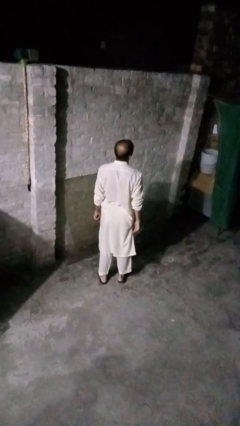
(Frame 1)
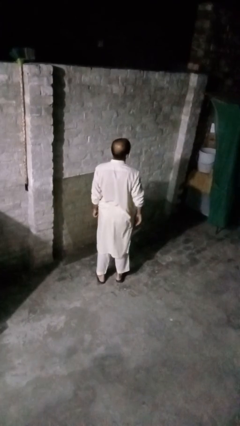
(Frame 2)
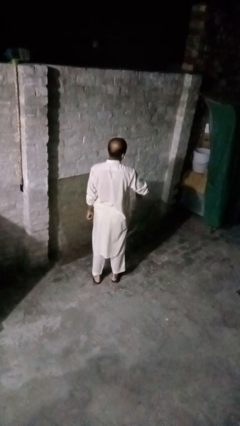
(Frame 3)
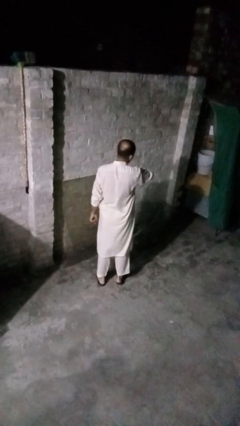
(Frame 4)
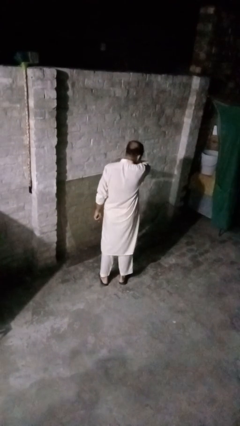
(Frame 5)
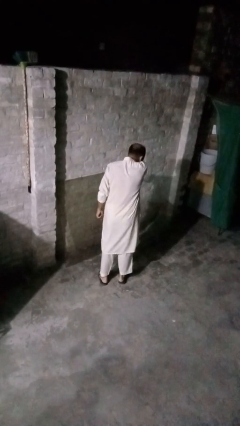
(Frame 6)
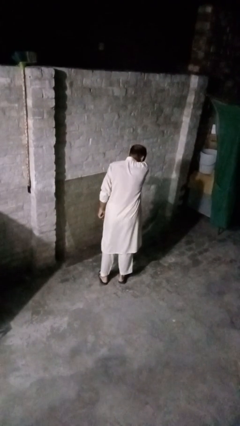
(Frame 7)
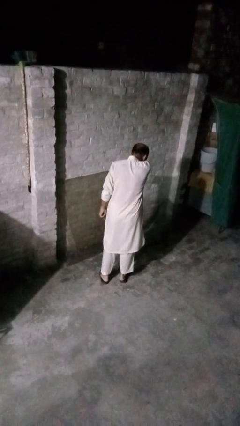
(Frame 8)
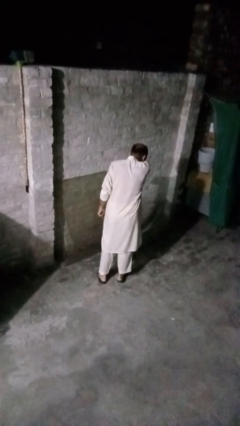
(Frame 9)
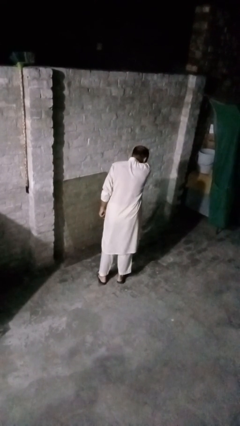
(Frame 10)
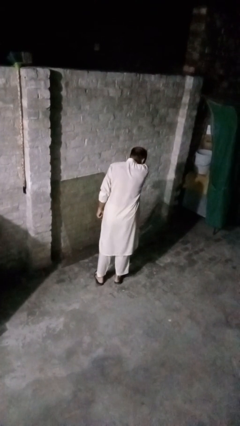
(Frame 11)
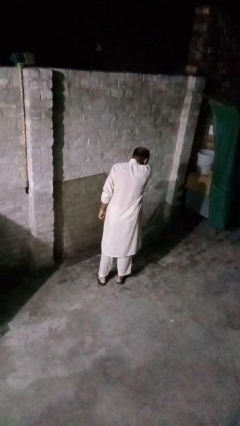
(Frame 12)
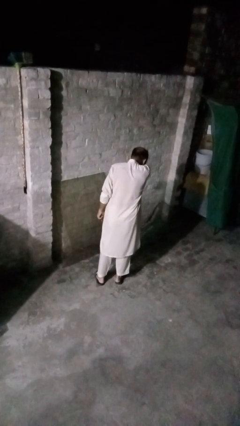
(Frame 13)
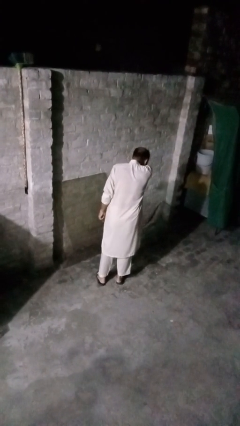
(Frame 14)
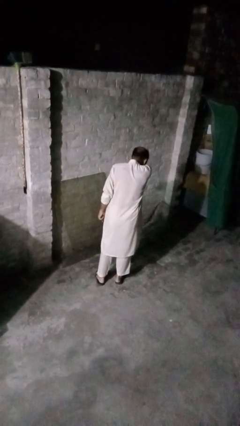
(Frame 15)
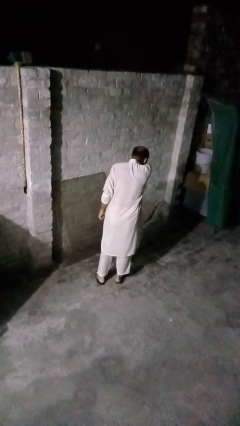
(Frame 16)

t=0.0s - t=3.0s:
person sneezes into arm

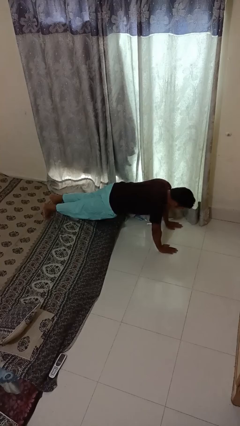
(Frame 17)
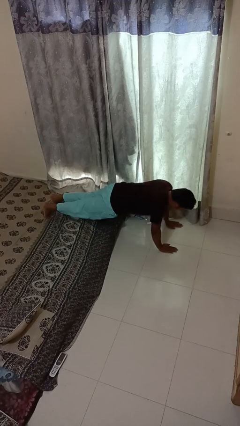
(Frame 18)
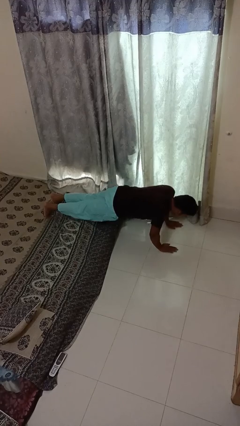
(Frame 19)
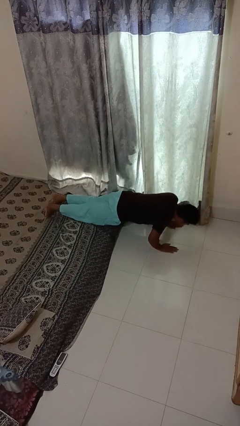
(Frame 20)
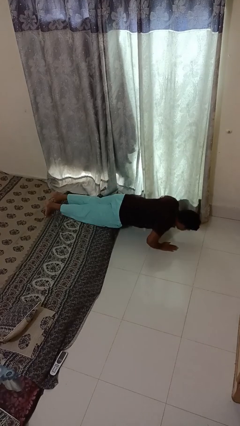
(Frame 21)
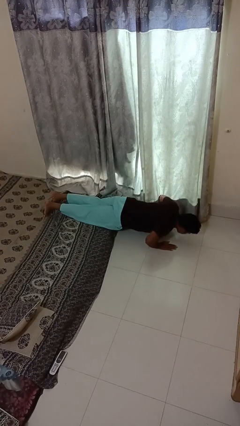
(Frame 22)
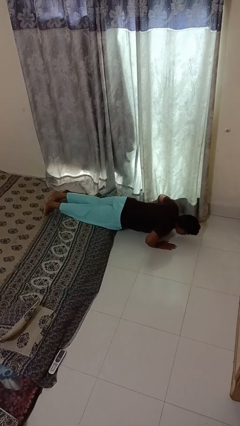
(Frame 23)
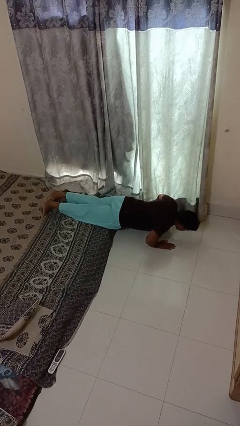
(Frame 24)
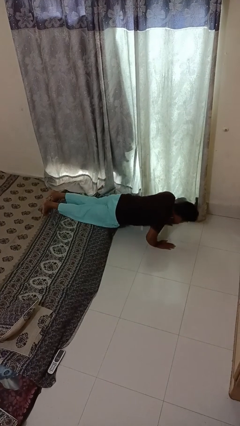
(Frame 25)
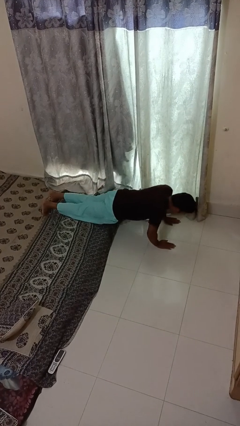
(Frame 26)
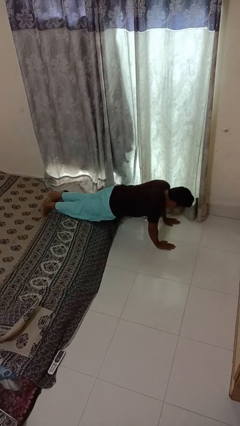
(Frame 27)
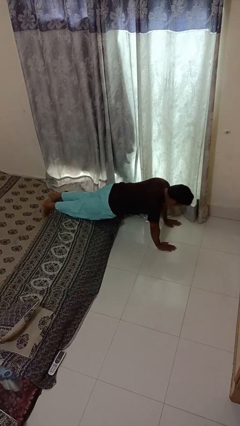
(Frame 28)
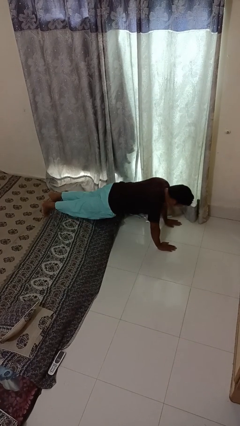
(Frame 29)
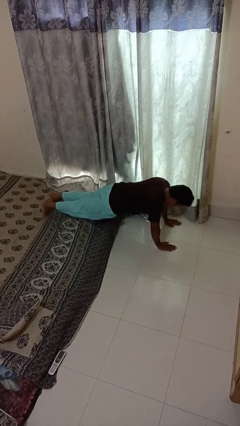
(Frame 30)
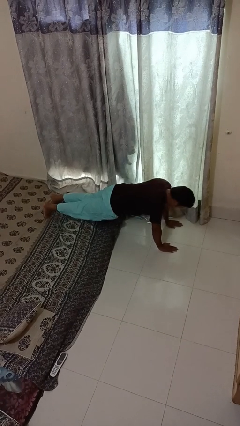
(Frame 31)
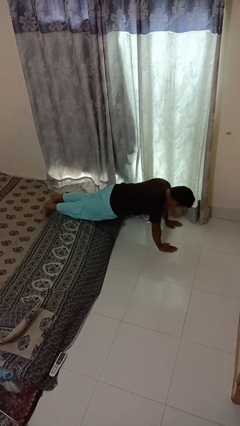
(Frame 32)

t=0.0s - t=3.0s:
person exercises with pushup

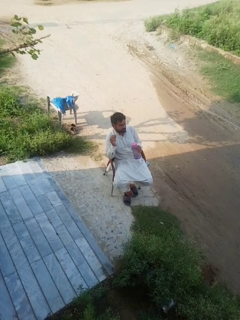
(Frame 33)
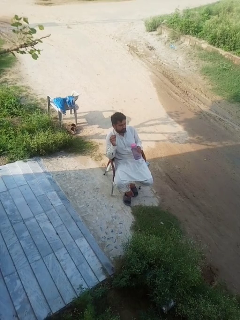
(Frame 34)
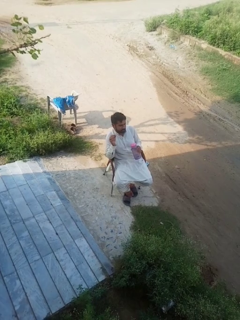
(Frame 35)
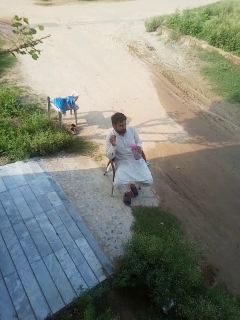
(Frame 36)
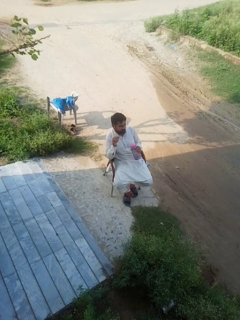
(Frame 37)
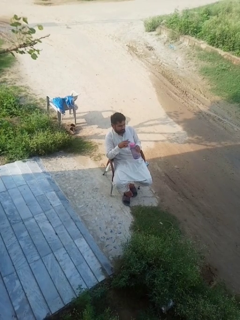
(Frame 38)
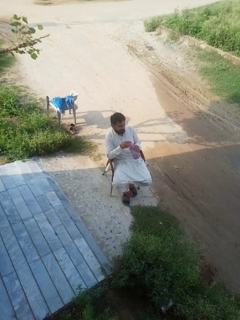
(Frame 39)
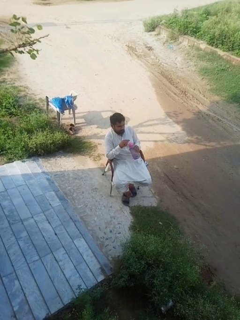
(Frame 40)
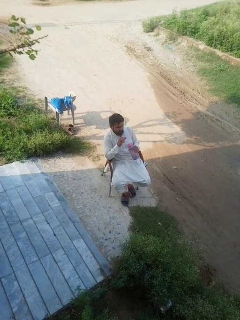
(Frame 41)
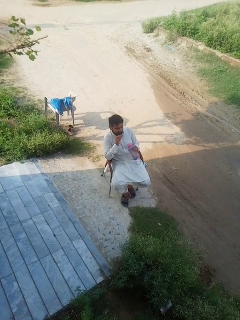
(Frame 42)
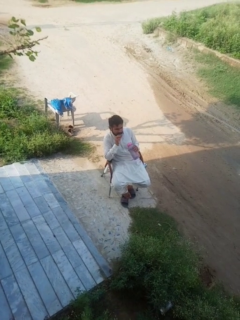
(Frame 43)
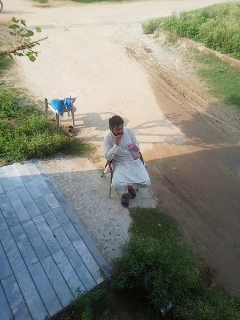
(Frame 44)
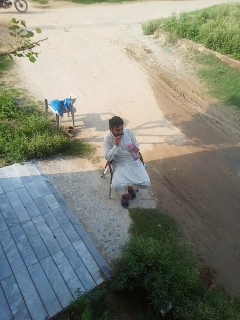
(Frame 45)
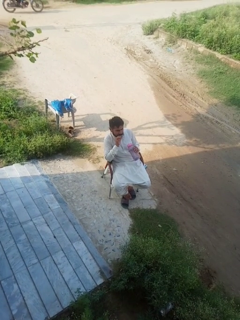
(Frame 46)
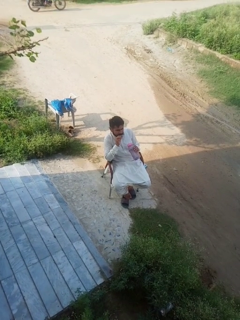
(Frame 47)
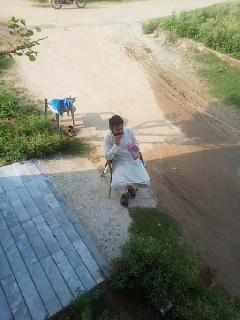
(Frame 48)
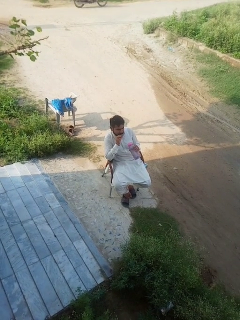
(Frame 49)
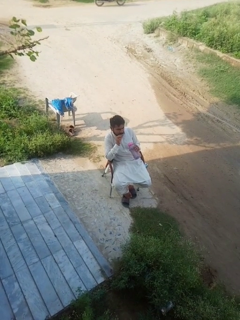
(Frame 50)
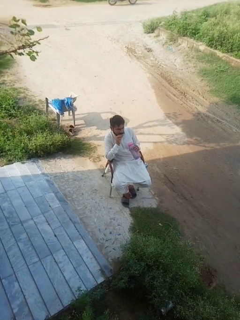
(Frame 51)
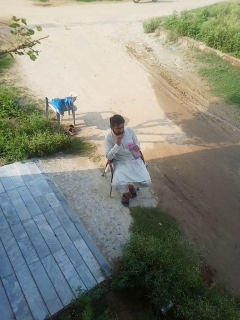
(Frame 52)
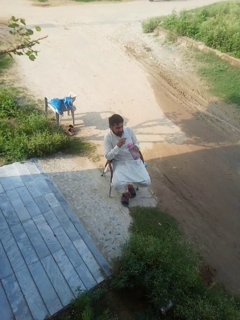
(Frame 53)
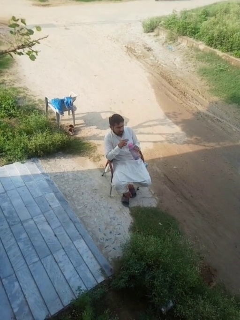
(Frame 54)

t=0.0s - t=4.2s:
person drinks from straw

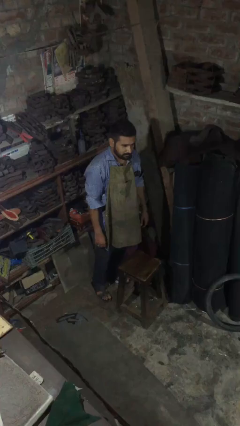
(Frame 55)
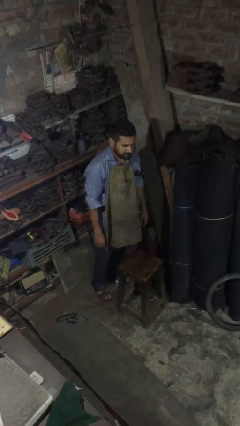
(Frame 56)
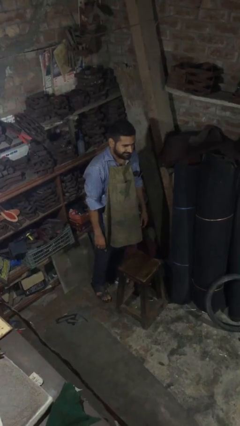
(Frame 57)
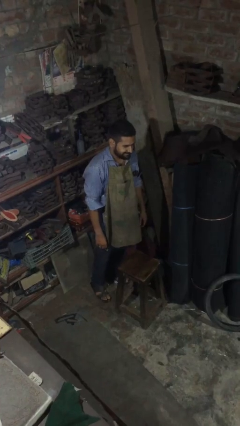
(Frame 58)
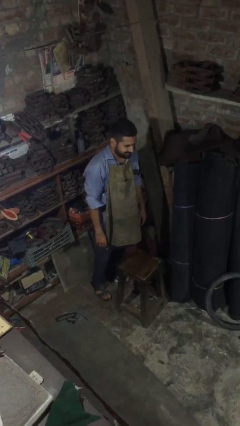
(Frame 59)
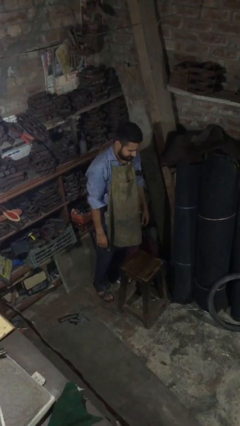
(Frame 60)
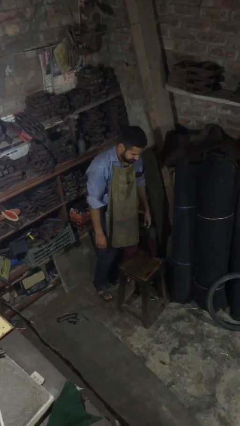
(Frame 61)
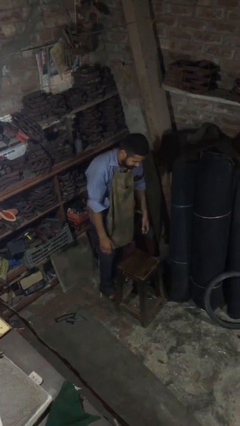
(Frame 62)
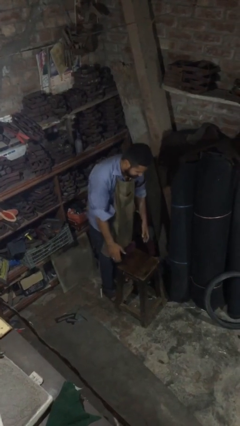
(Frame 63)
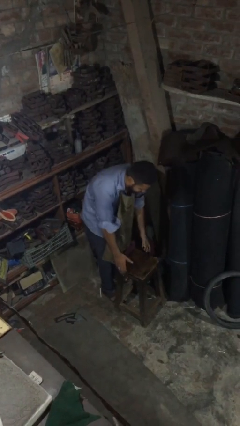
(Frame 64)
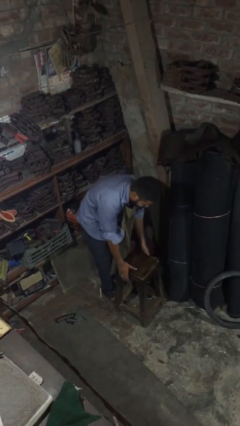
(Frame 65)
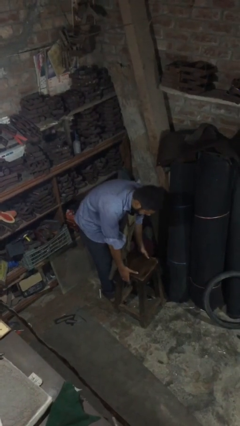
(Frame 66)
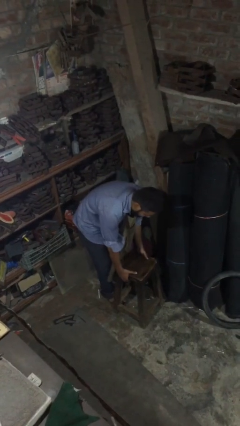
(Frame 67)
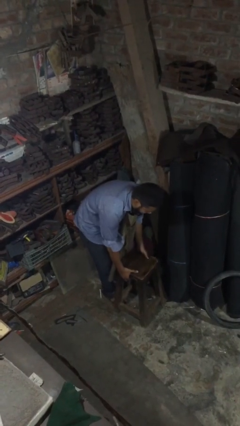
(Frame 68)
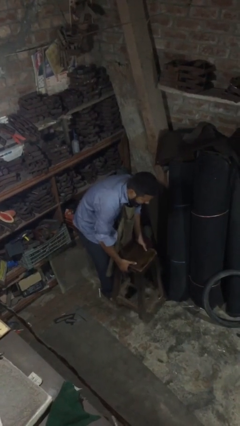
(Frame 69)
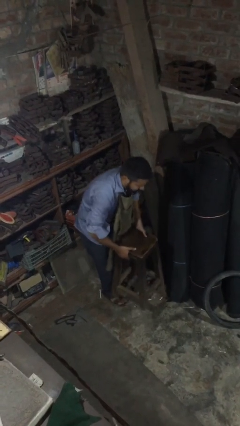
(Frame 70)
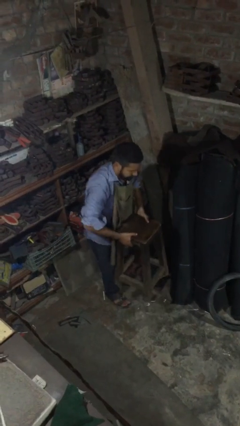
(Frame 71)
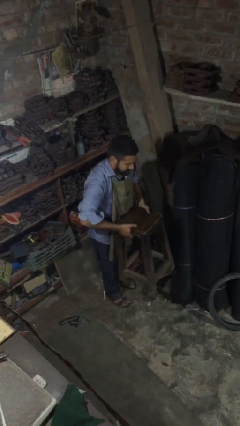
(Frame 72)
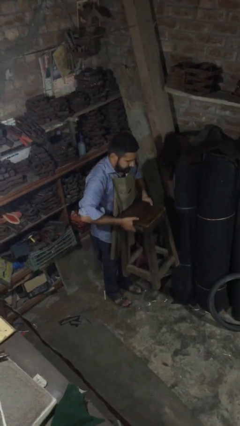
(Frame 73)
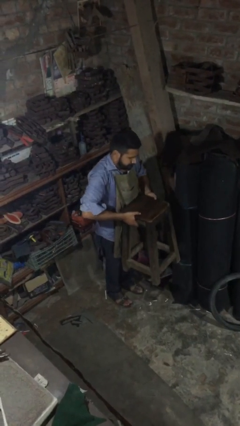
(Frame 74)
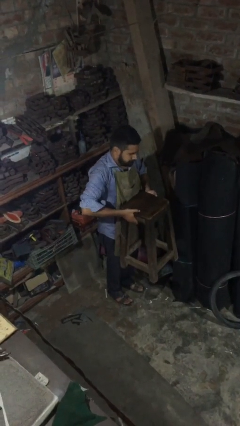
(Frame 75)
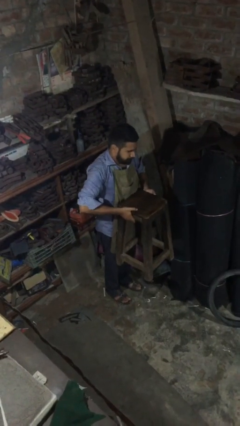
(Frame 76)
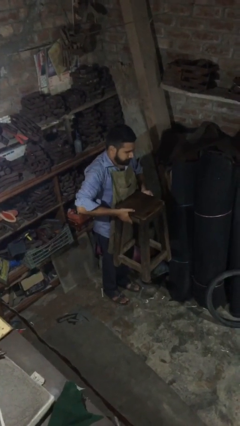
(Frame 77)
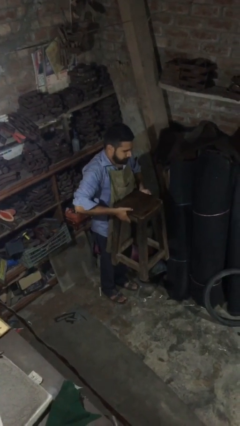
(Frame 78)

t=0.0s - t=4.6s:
person picks up object from floor

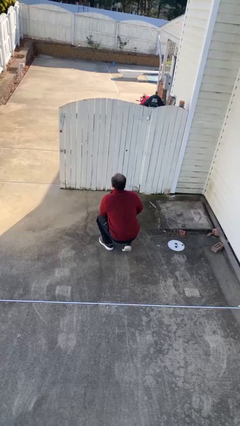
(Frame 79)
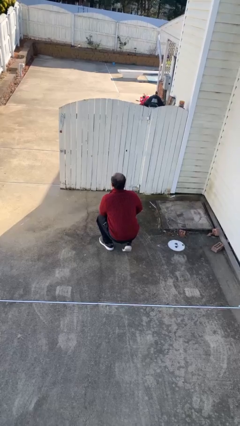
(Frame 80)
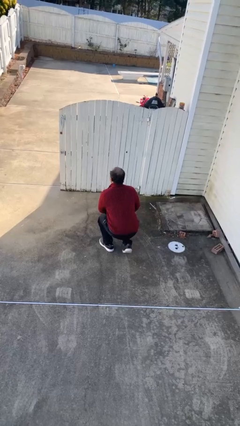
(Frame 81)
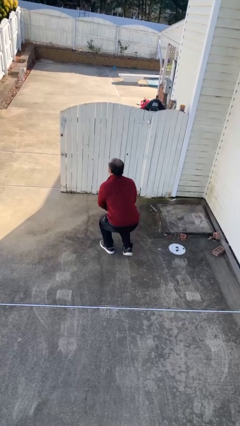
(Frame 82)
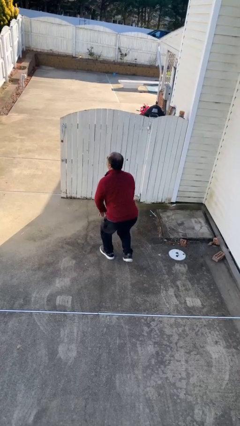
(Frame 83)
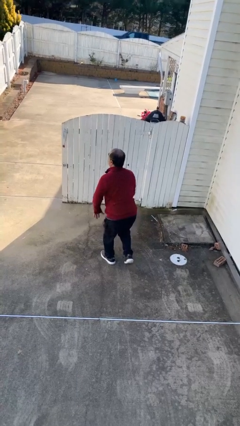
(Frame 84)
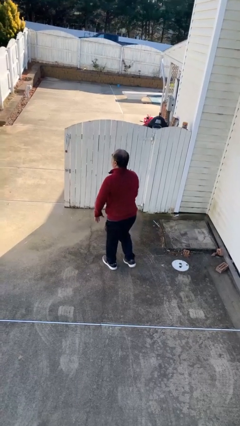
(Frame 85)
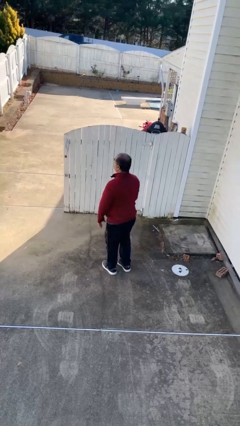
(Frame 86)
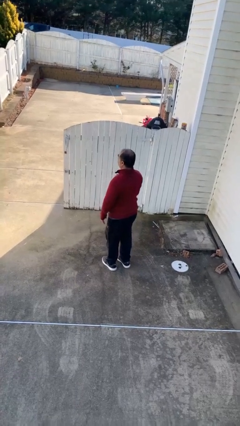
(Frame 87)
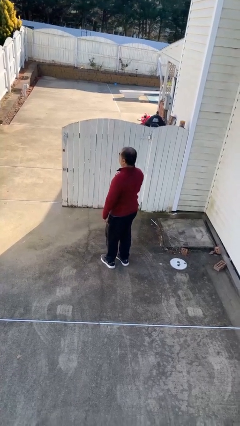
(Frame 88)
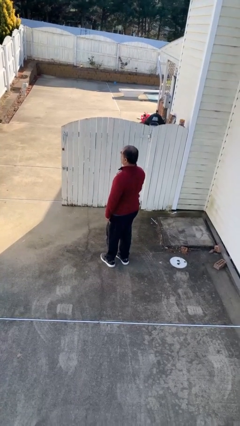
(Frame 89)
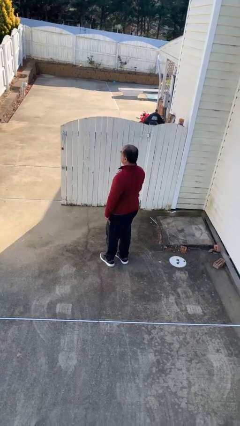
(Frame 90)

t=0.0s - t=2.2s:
person stands up

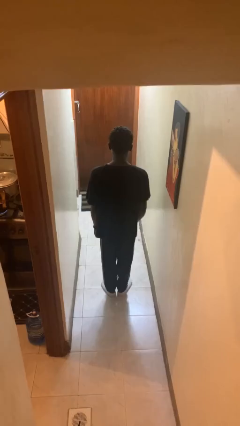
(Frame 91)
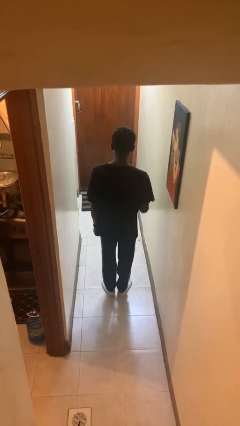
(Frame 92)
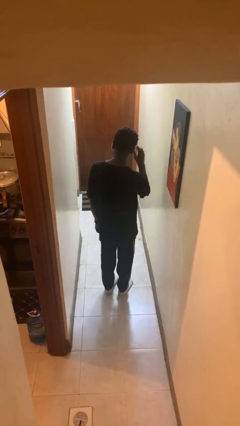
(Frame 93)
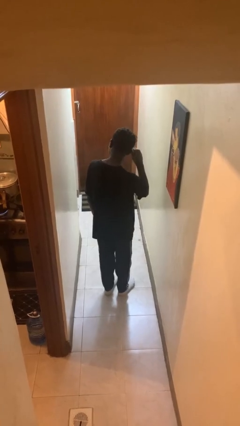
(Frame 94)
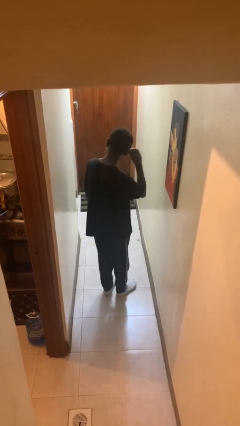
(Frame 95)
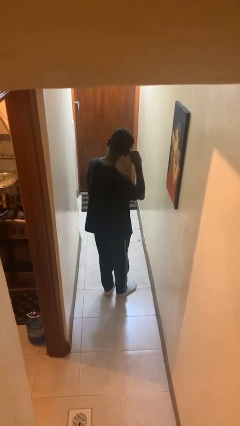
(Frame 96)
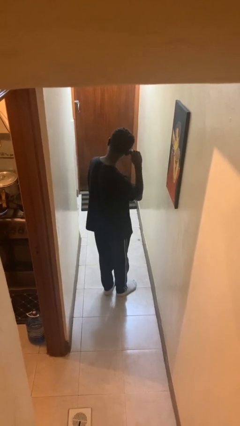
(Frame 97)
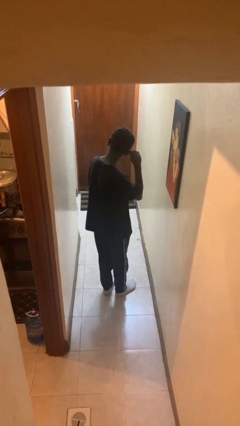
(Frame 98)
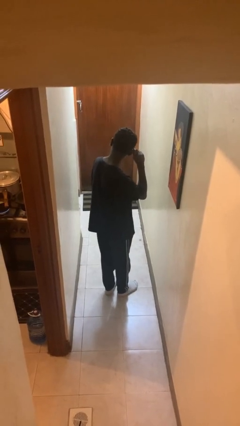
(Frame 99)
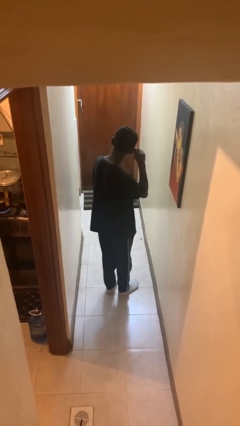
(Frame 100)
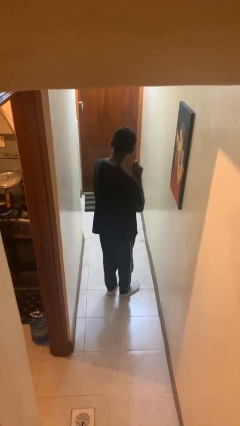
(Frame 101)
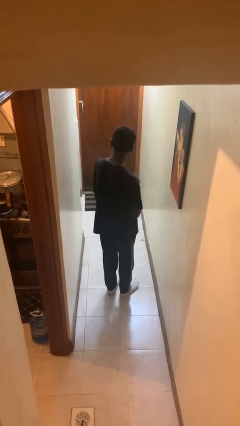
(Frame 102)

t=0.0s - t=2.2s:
person touches earlobe
